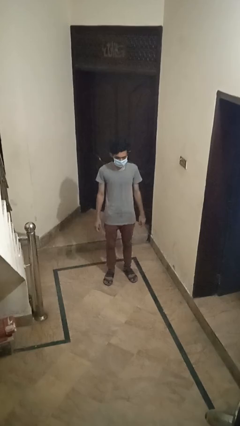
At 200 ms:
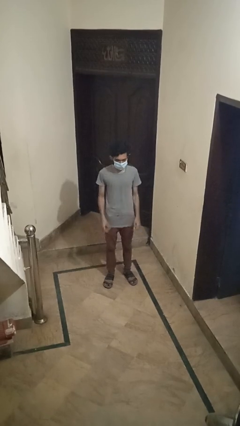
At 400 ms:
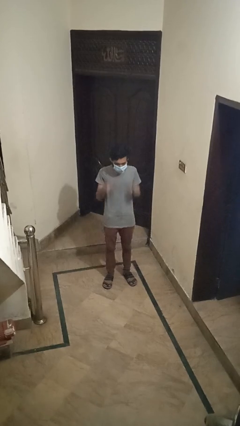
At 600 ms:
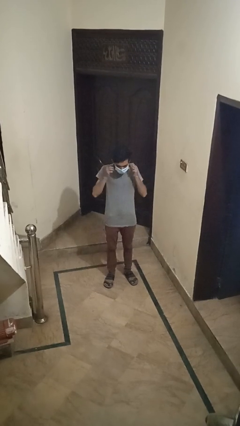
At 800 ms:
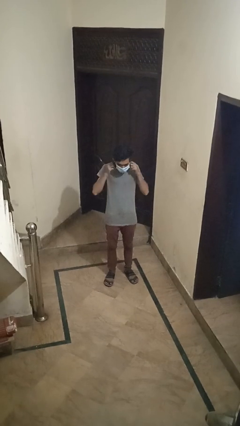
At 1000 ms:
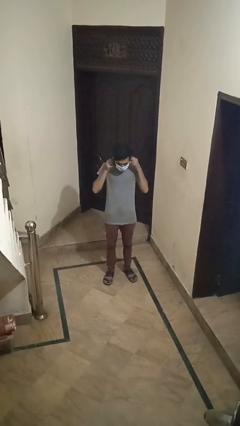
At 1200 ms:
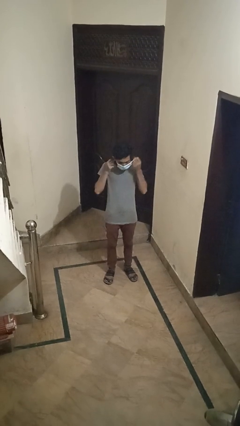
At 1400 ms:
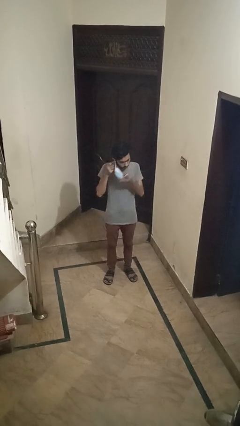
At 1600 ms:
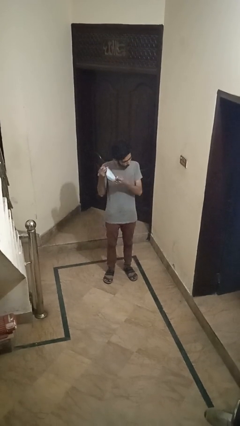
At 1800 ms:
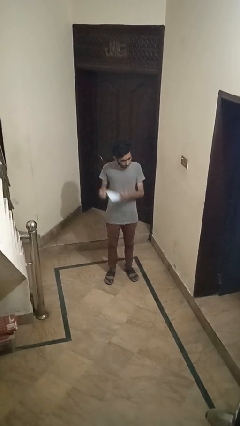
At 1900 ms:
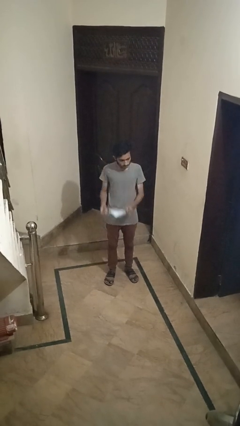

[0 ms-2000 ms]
person takes off facemask

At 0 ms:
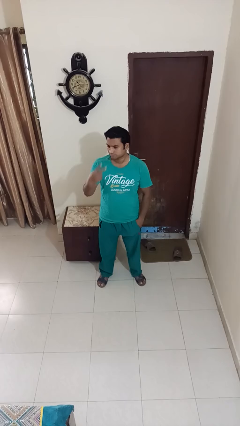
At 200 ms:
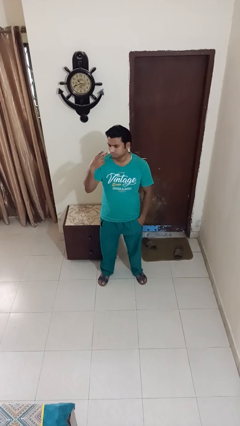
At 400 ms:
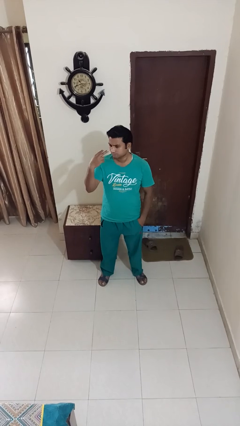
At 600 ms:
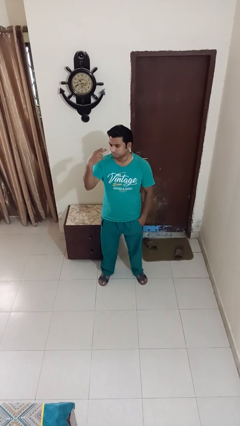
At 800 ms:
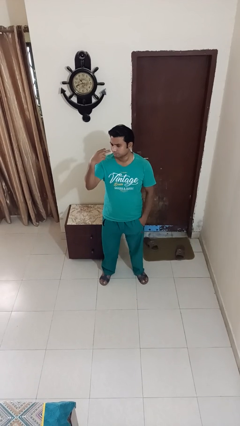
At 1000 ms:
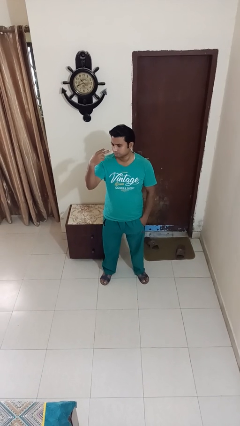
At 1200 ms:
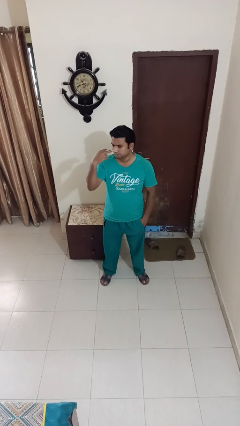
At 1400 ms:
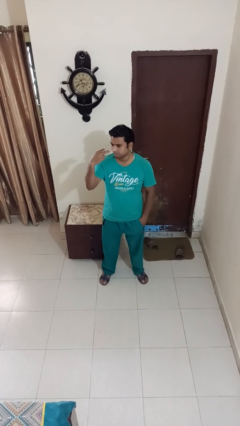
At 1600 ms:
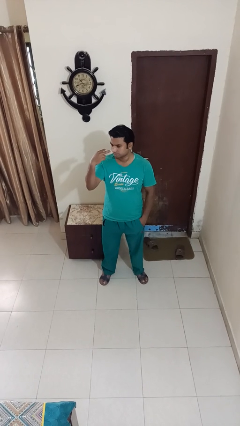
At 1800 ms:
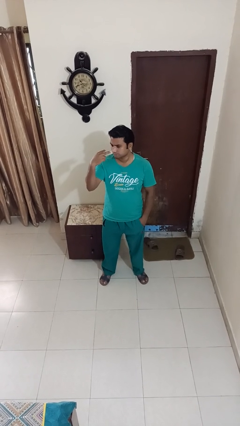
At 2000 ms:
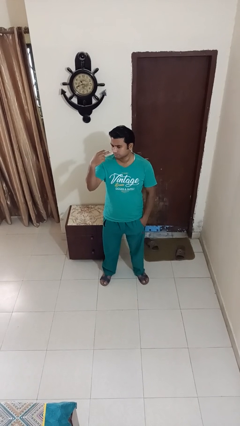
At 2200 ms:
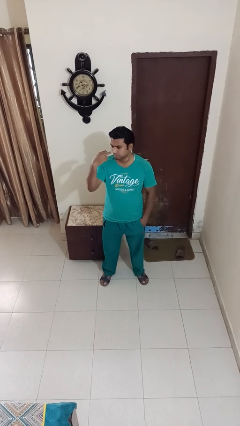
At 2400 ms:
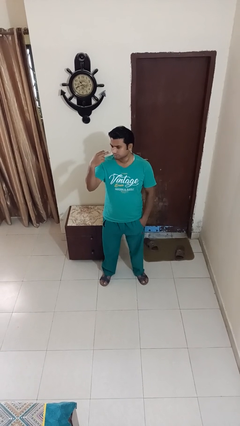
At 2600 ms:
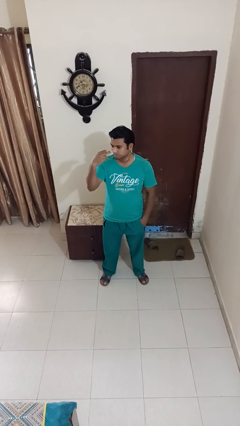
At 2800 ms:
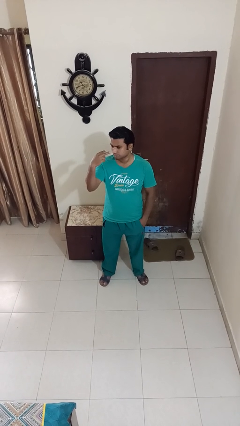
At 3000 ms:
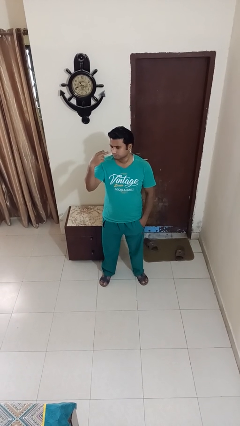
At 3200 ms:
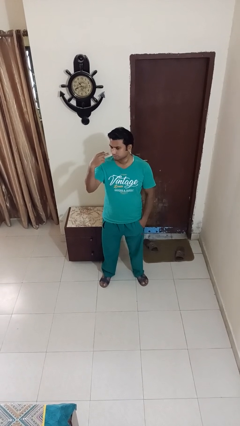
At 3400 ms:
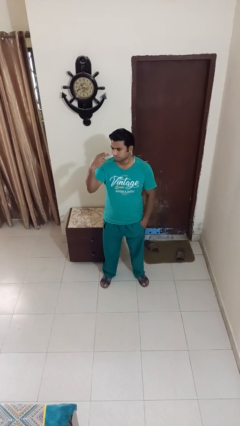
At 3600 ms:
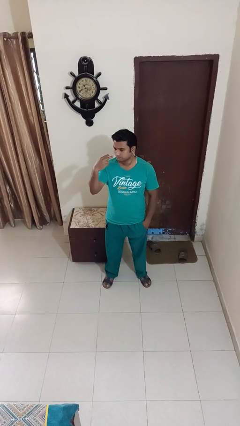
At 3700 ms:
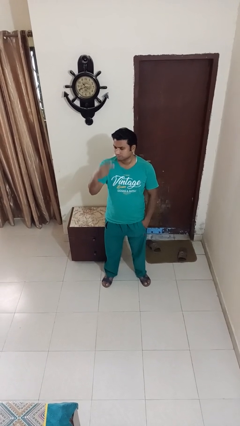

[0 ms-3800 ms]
person gestures watch closely

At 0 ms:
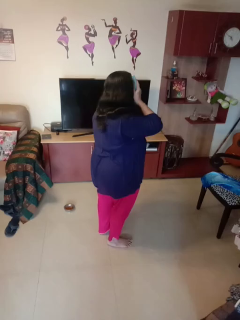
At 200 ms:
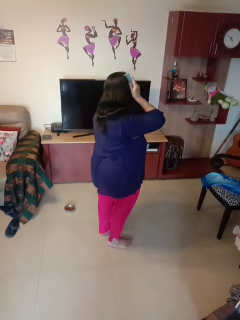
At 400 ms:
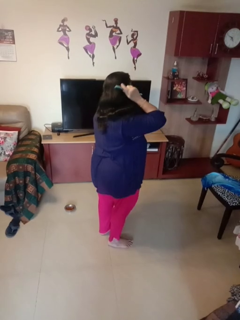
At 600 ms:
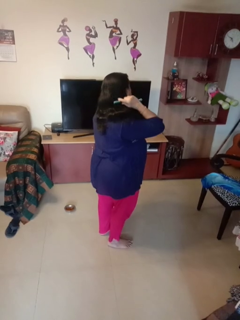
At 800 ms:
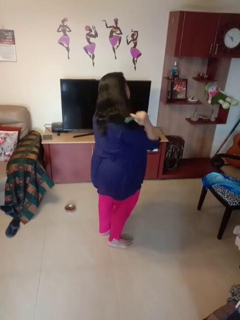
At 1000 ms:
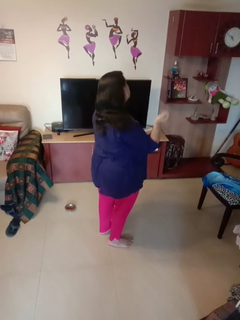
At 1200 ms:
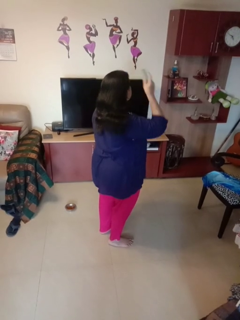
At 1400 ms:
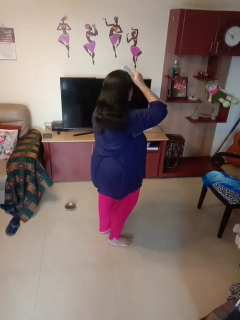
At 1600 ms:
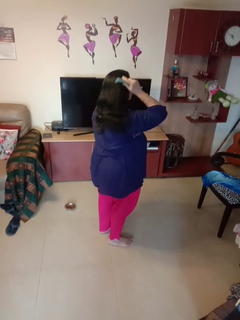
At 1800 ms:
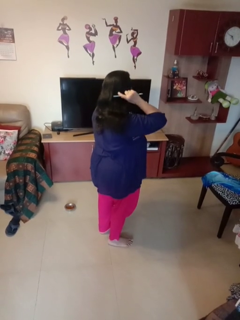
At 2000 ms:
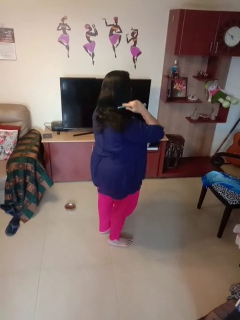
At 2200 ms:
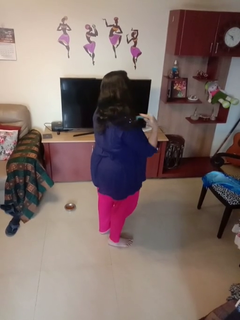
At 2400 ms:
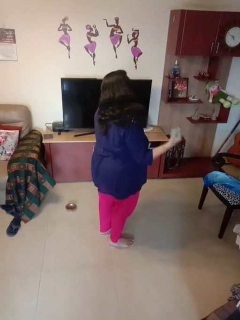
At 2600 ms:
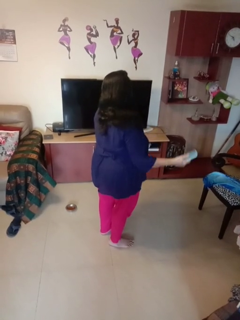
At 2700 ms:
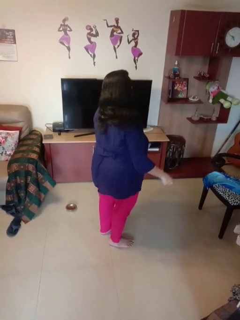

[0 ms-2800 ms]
person brushes hair

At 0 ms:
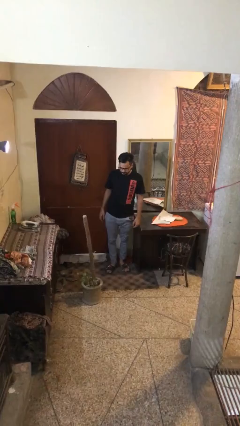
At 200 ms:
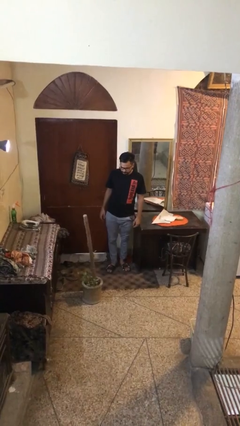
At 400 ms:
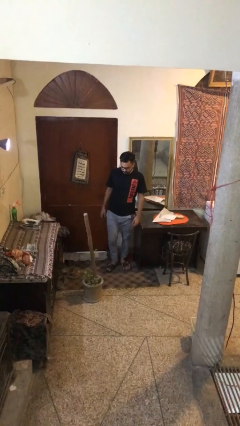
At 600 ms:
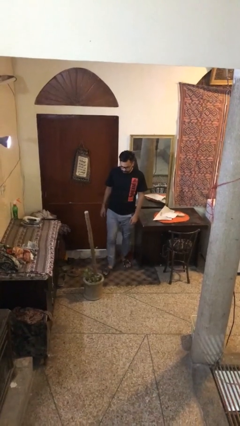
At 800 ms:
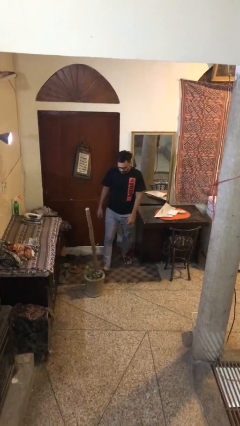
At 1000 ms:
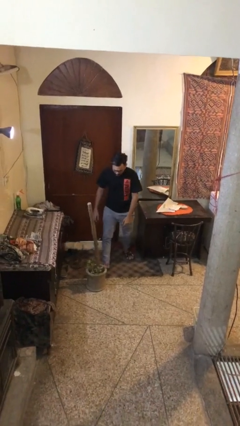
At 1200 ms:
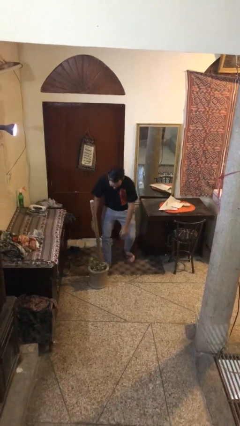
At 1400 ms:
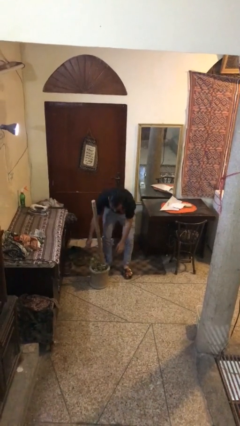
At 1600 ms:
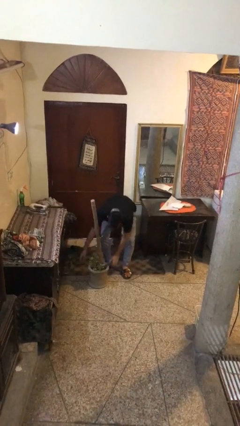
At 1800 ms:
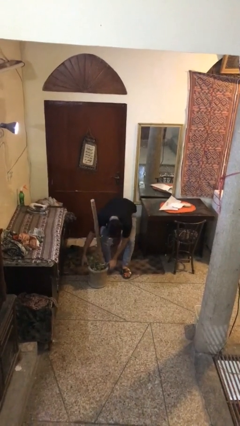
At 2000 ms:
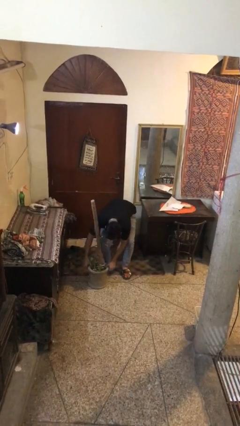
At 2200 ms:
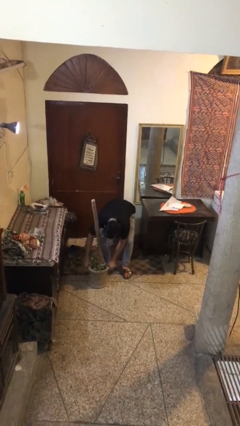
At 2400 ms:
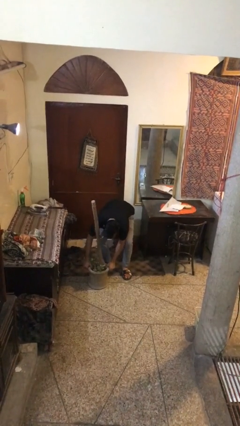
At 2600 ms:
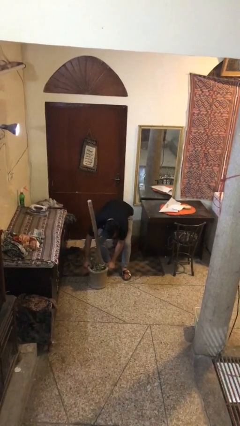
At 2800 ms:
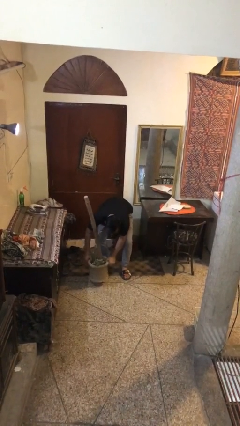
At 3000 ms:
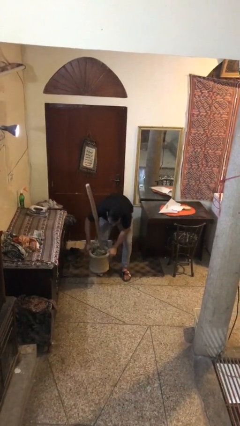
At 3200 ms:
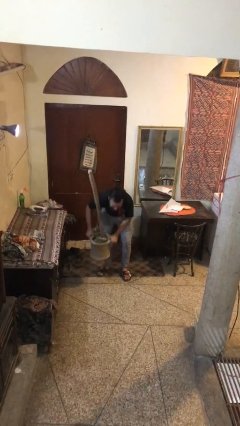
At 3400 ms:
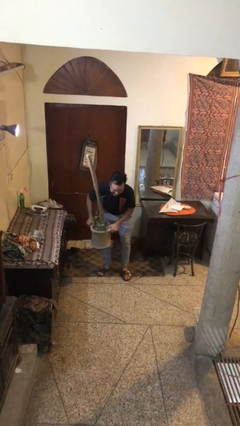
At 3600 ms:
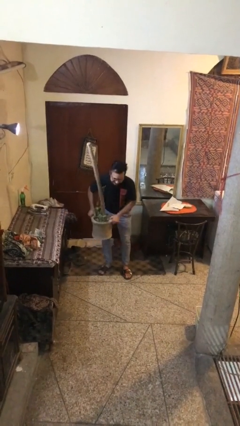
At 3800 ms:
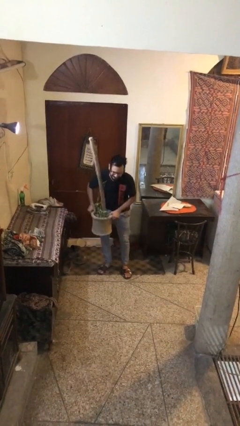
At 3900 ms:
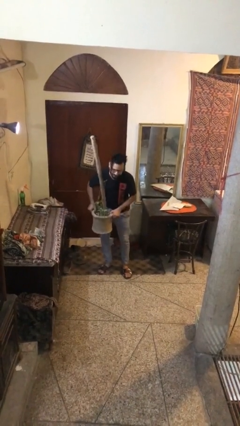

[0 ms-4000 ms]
person picks up object from floor

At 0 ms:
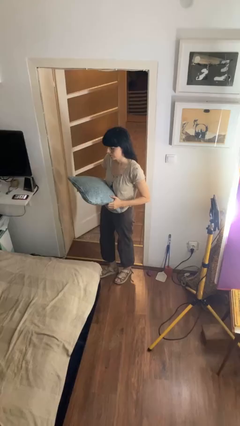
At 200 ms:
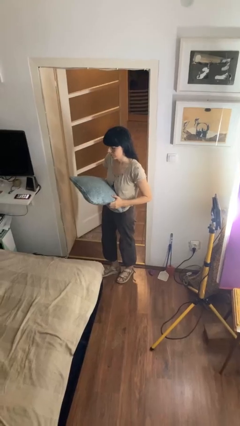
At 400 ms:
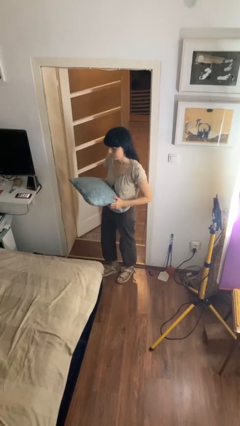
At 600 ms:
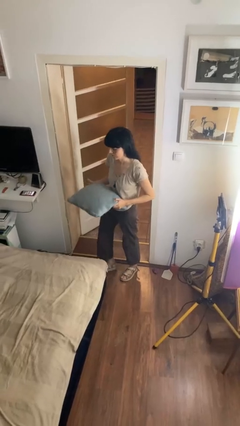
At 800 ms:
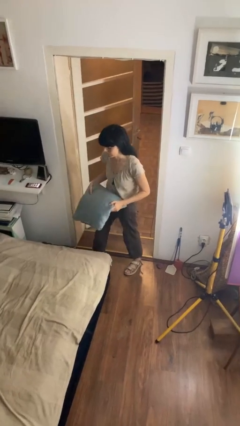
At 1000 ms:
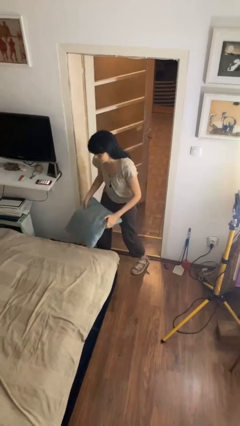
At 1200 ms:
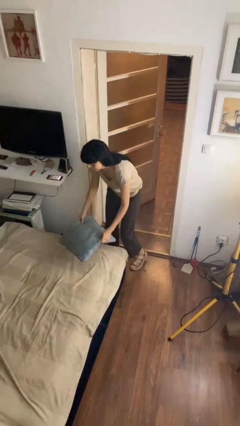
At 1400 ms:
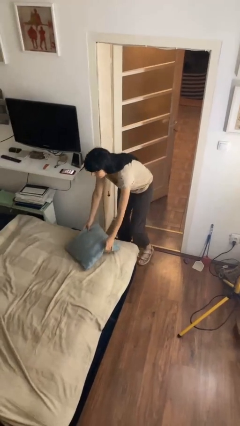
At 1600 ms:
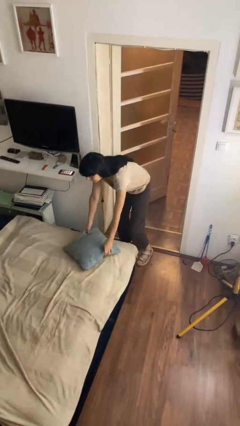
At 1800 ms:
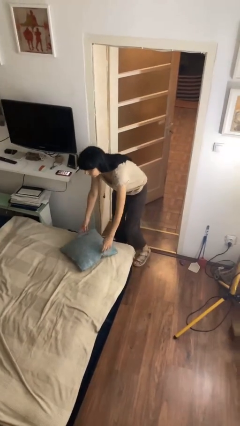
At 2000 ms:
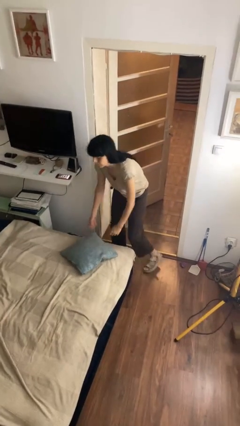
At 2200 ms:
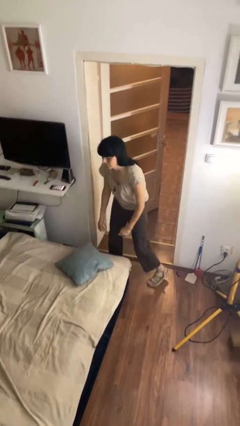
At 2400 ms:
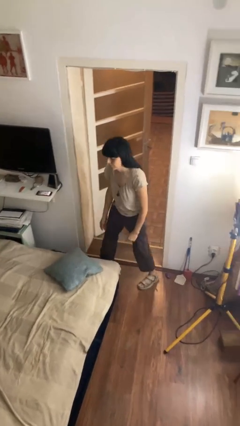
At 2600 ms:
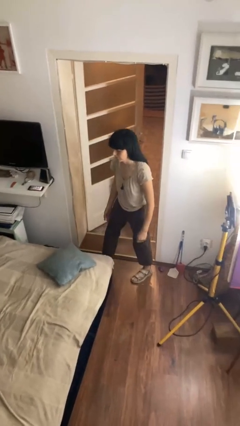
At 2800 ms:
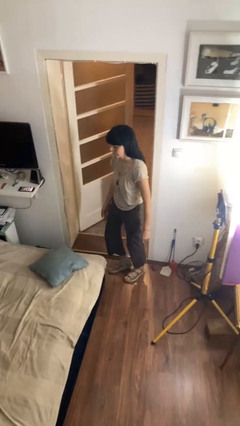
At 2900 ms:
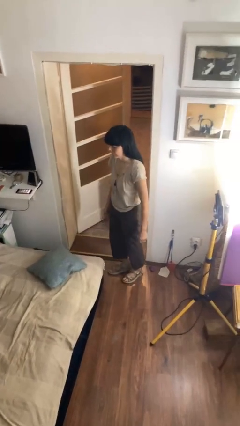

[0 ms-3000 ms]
person puts down object on bed

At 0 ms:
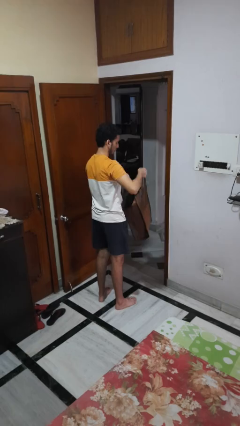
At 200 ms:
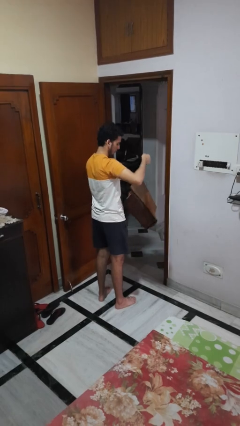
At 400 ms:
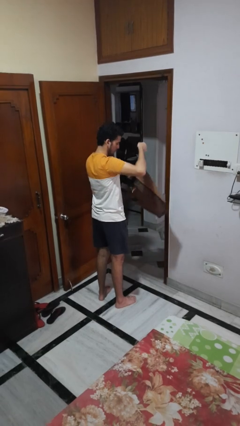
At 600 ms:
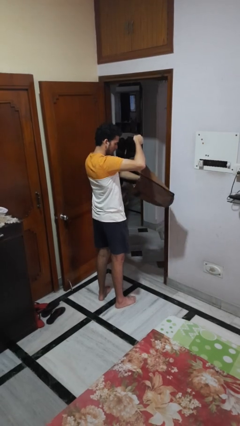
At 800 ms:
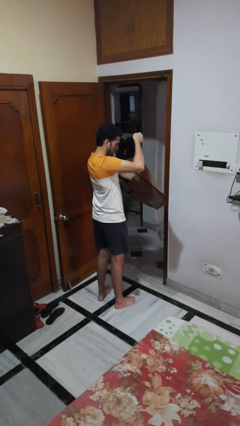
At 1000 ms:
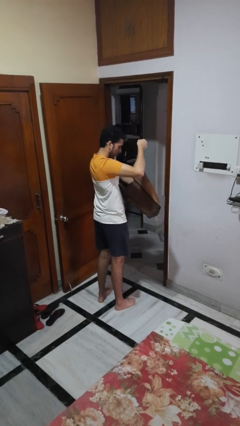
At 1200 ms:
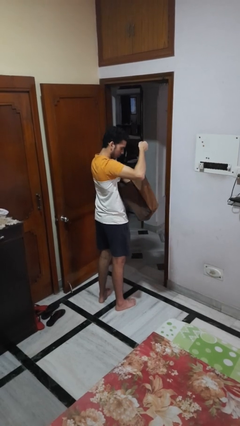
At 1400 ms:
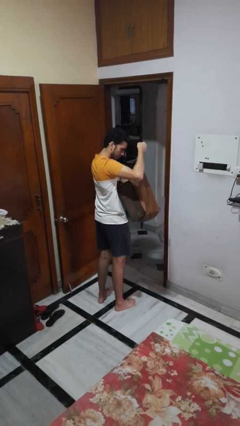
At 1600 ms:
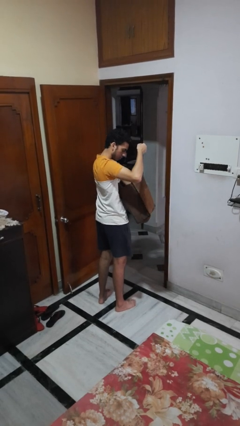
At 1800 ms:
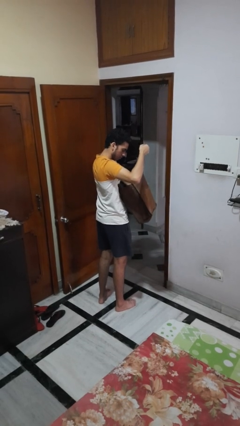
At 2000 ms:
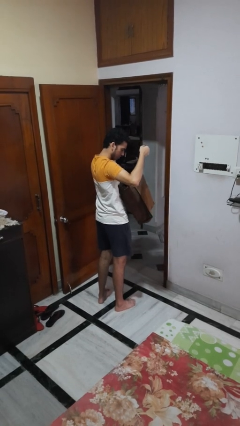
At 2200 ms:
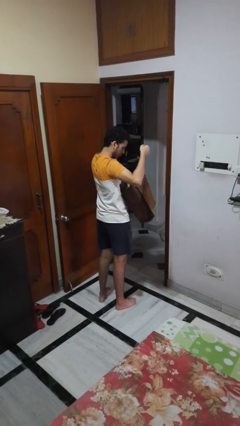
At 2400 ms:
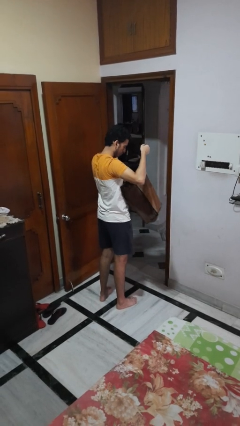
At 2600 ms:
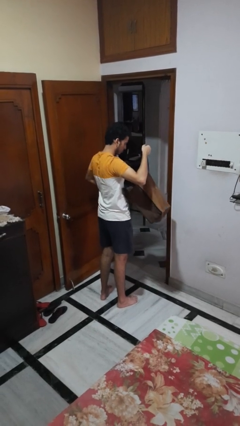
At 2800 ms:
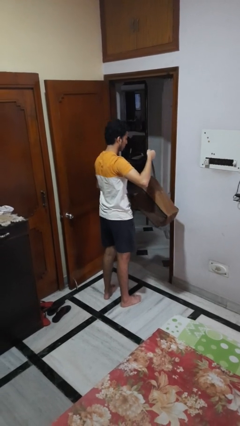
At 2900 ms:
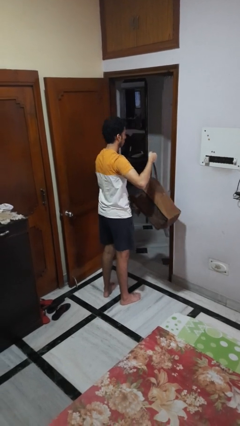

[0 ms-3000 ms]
person searches in bag
